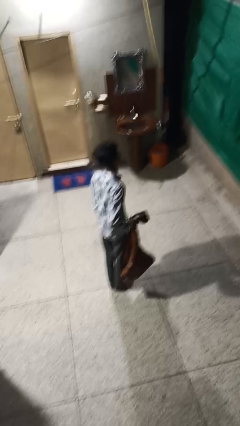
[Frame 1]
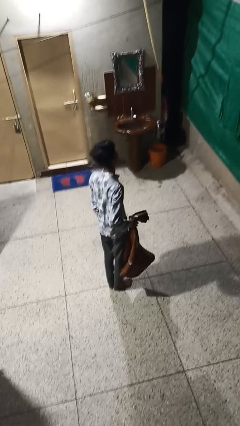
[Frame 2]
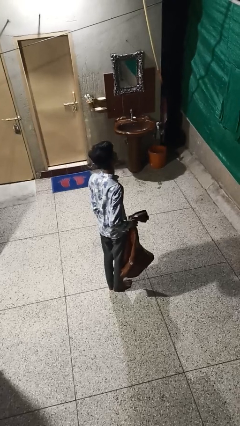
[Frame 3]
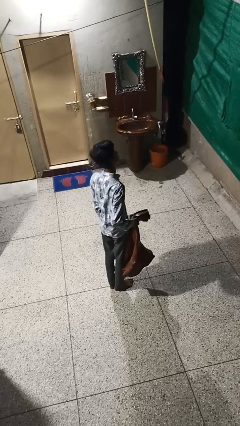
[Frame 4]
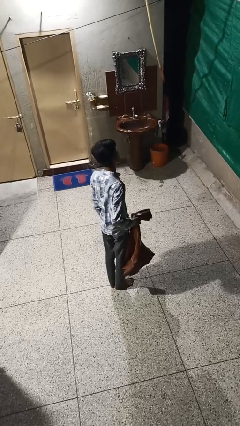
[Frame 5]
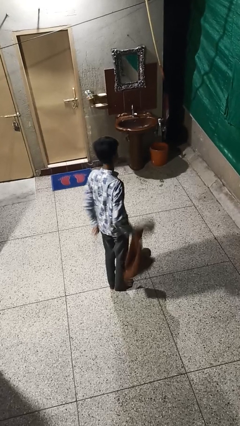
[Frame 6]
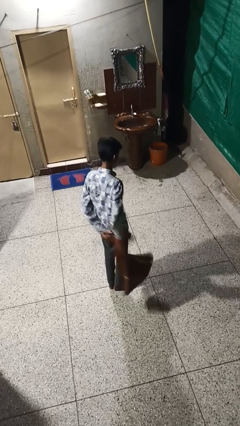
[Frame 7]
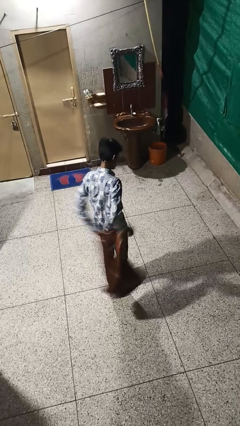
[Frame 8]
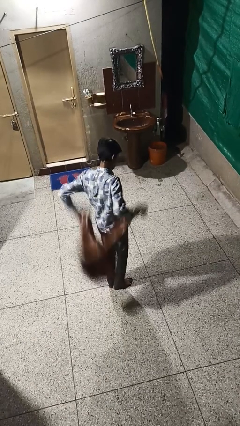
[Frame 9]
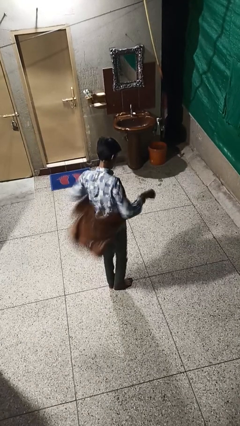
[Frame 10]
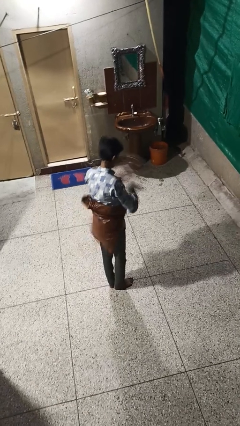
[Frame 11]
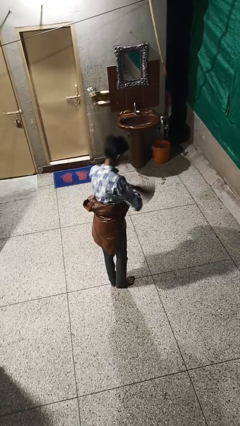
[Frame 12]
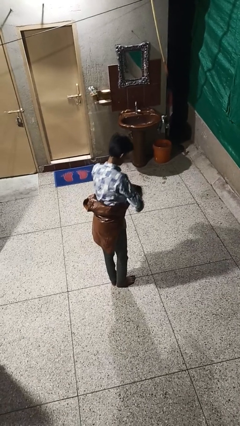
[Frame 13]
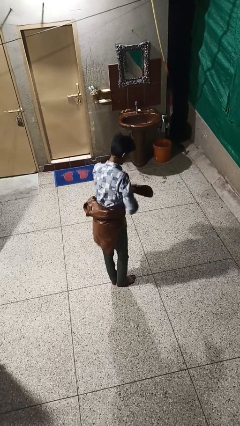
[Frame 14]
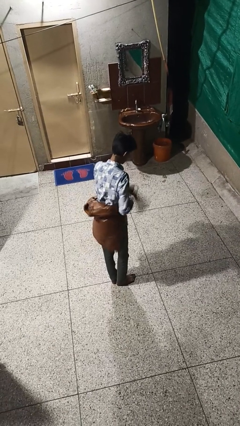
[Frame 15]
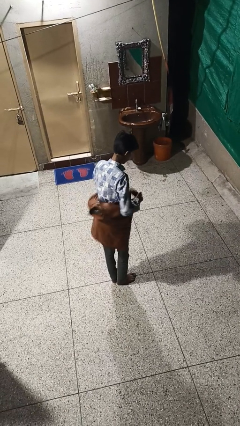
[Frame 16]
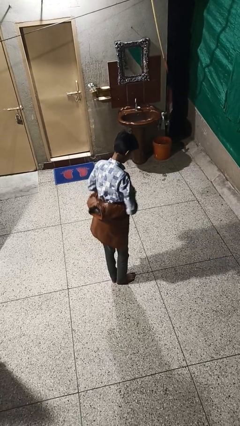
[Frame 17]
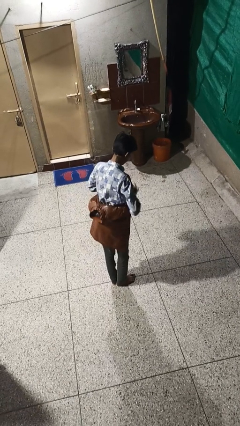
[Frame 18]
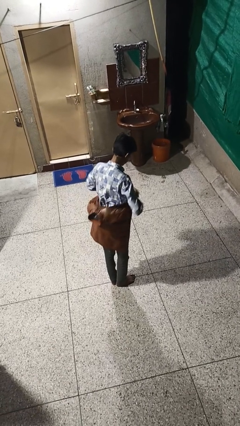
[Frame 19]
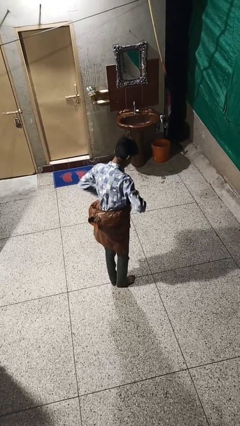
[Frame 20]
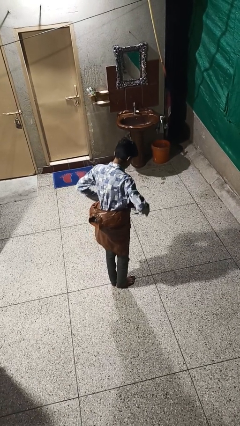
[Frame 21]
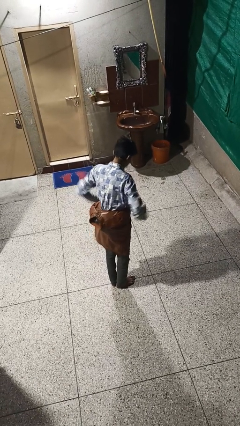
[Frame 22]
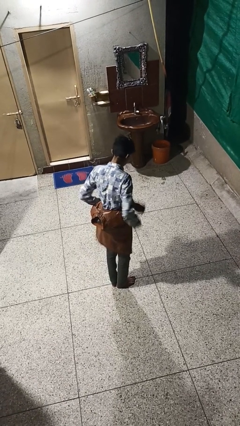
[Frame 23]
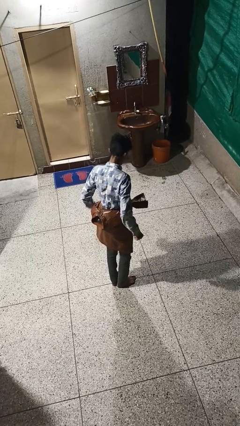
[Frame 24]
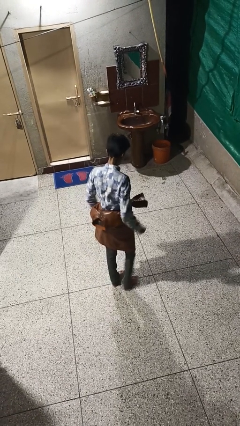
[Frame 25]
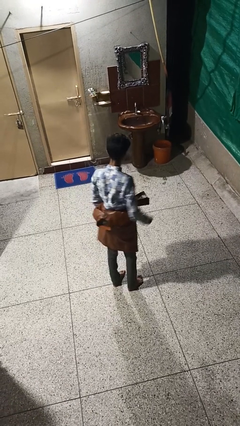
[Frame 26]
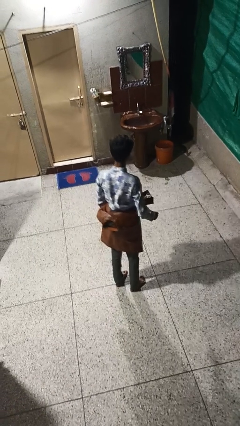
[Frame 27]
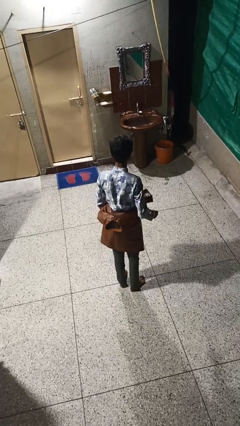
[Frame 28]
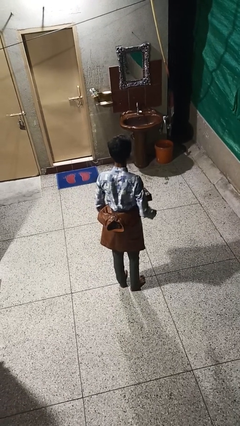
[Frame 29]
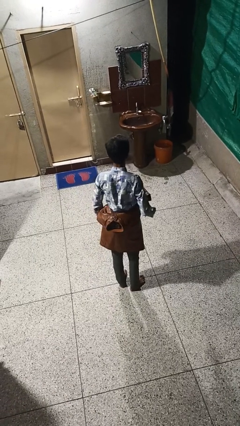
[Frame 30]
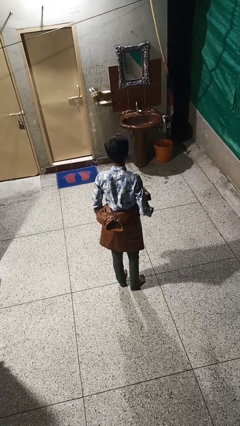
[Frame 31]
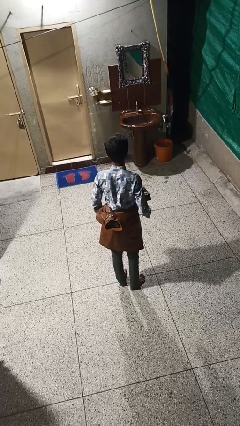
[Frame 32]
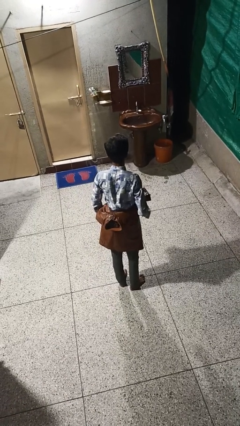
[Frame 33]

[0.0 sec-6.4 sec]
person ties jacket around waist

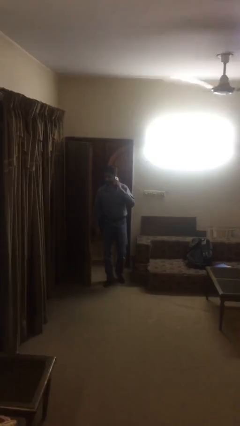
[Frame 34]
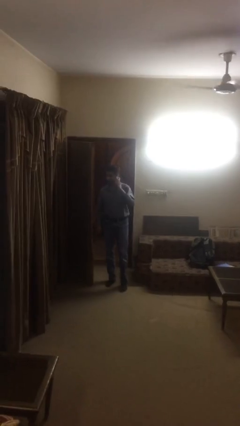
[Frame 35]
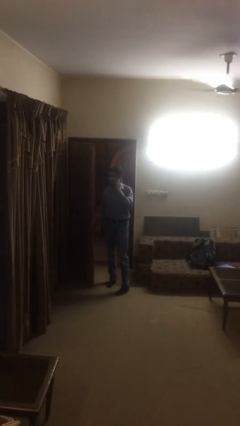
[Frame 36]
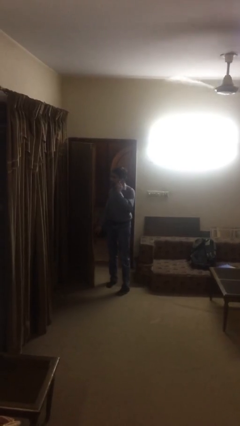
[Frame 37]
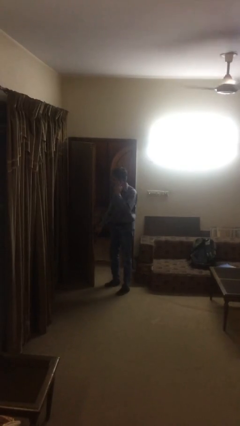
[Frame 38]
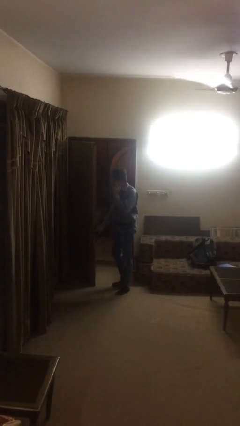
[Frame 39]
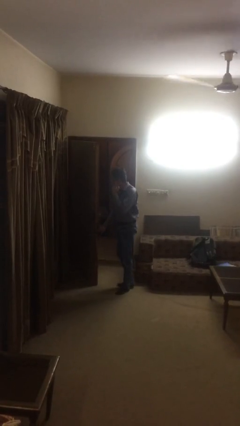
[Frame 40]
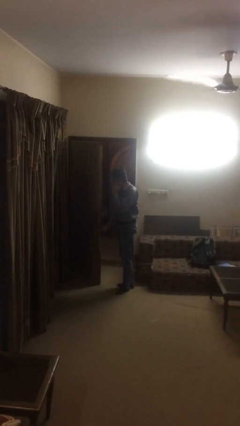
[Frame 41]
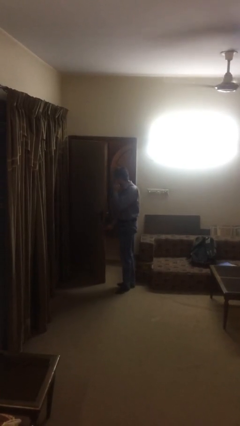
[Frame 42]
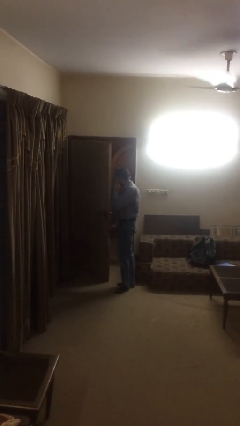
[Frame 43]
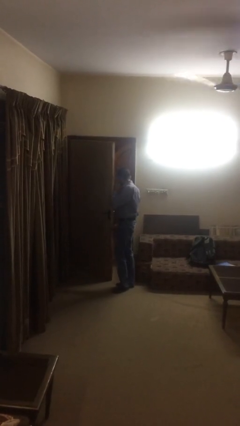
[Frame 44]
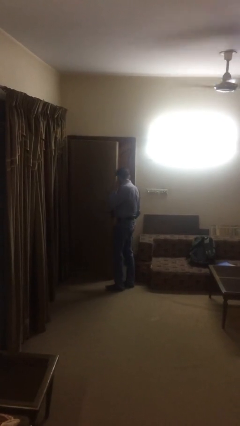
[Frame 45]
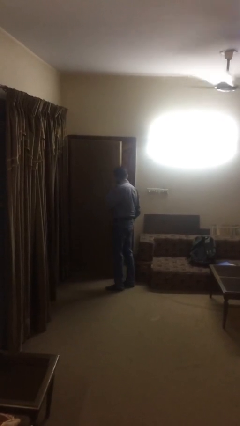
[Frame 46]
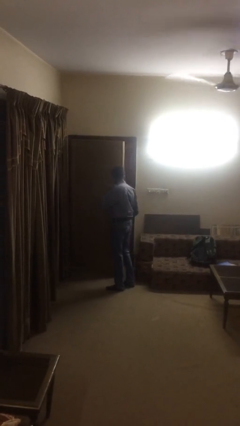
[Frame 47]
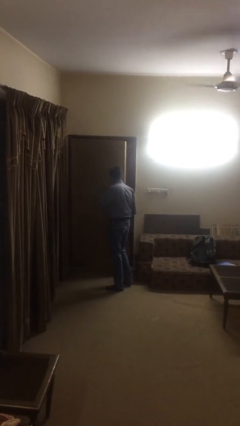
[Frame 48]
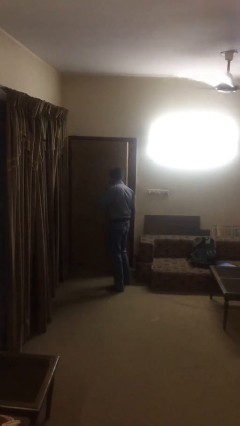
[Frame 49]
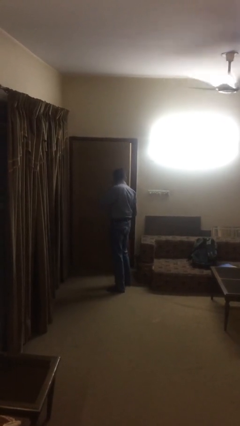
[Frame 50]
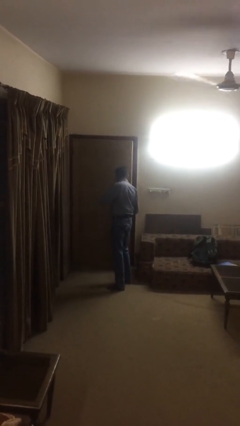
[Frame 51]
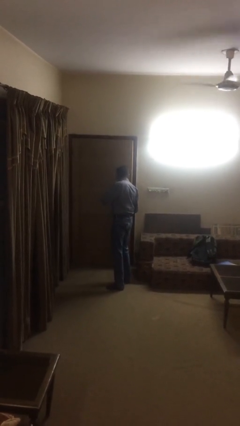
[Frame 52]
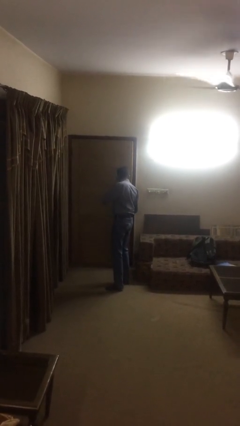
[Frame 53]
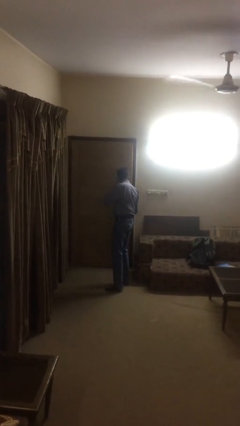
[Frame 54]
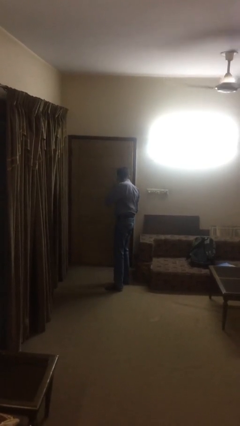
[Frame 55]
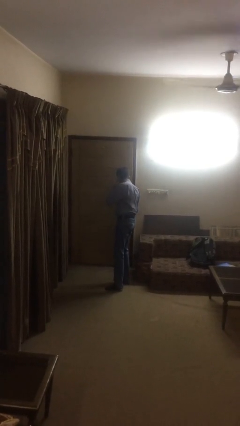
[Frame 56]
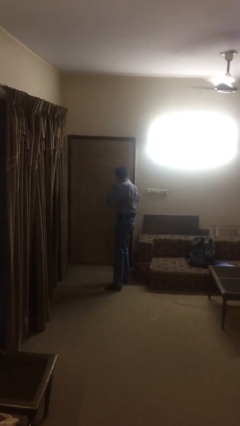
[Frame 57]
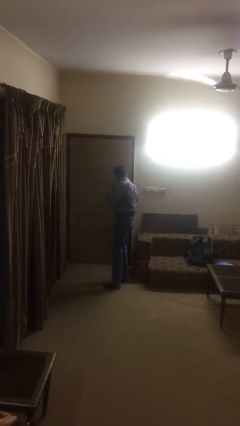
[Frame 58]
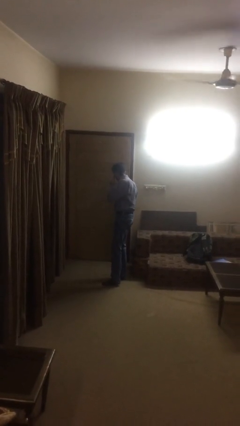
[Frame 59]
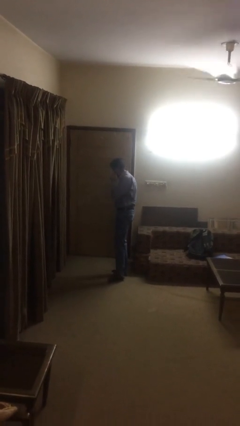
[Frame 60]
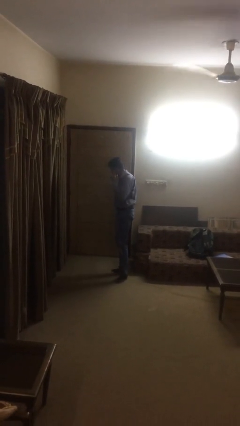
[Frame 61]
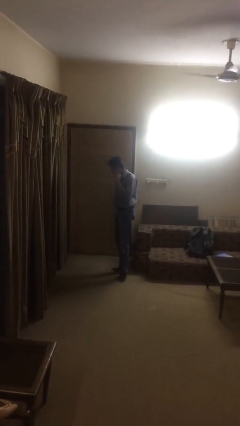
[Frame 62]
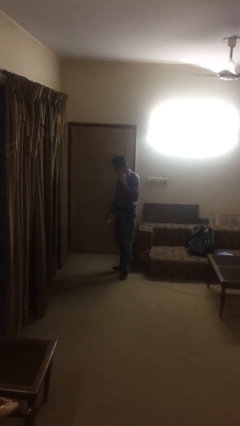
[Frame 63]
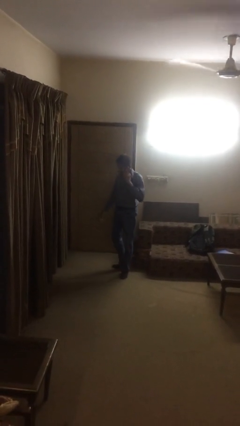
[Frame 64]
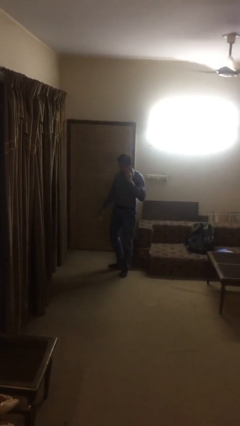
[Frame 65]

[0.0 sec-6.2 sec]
person closes facility door

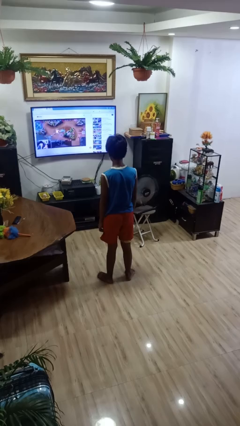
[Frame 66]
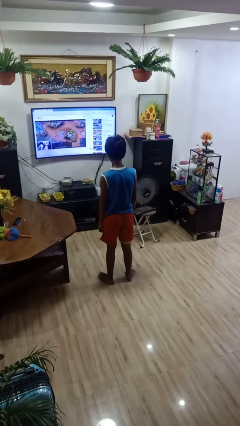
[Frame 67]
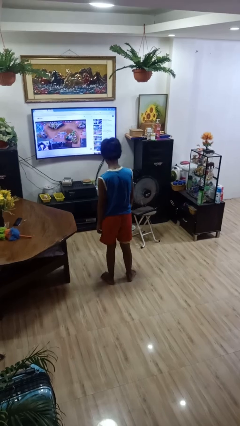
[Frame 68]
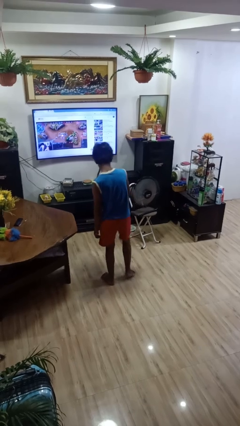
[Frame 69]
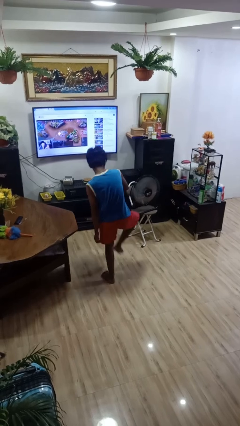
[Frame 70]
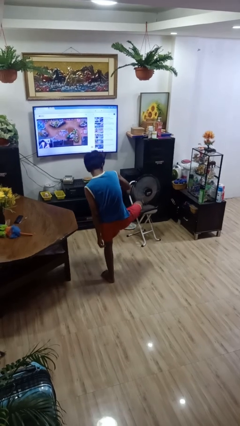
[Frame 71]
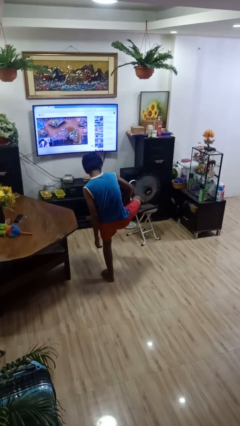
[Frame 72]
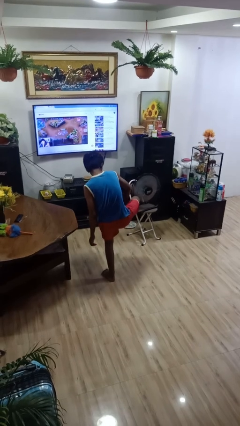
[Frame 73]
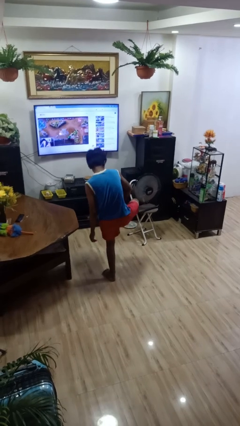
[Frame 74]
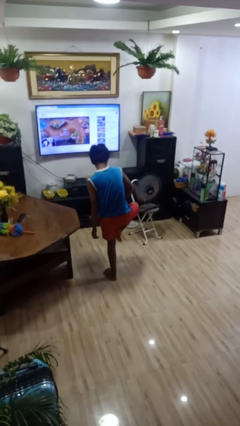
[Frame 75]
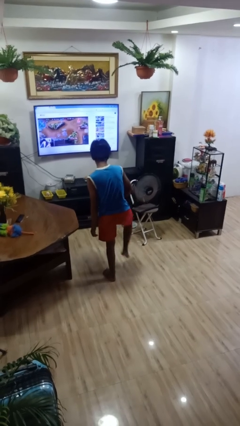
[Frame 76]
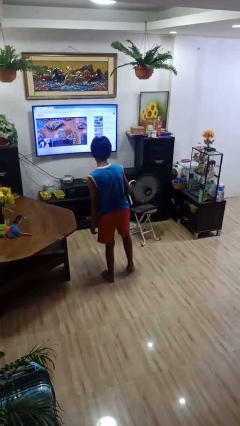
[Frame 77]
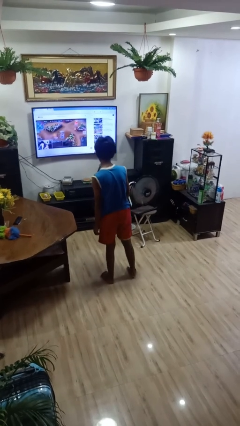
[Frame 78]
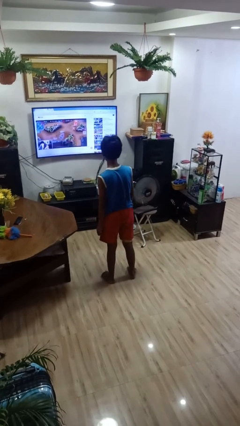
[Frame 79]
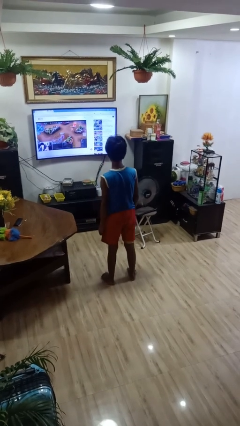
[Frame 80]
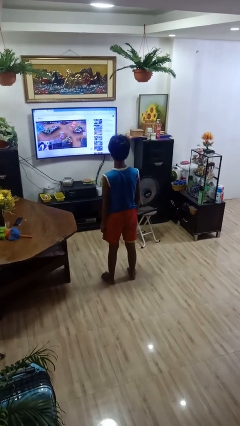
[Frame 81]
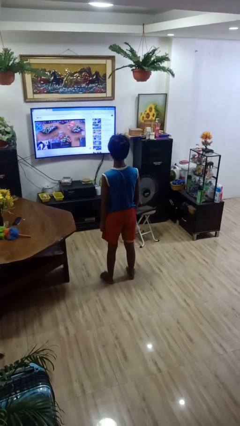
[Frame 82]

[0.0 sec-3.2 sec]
person swats bug

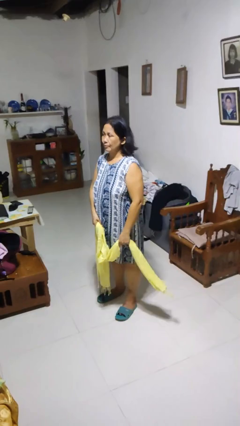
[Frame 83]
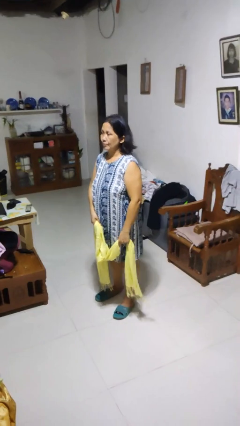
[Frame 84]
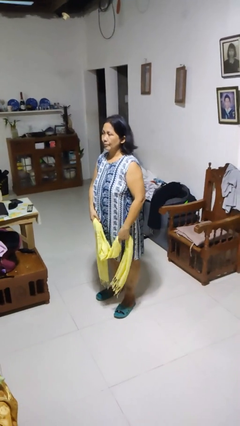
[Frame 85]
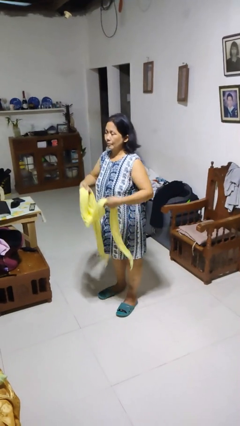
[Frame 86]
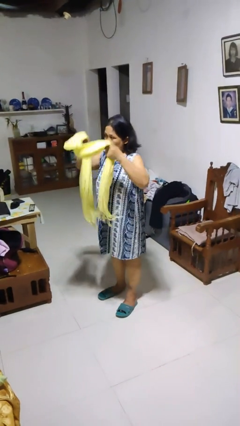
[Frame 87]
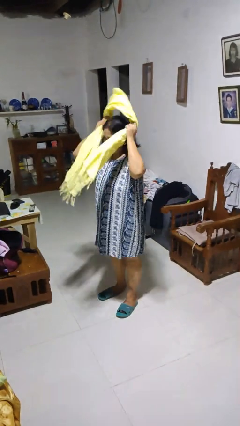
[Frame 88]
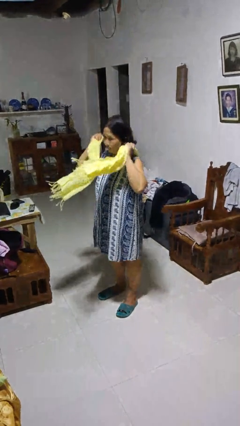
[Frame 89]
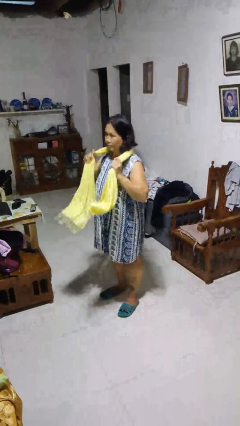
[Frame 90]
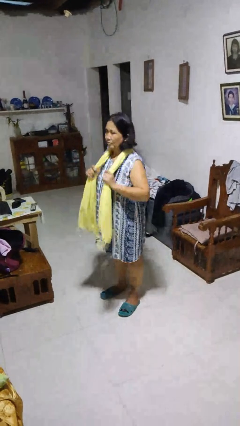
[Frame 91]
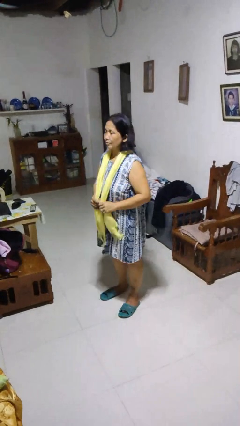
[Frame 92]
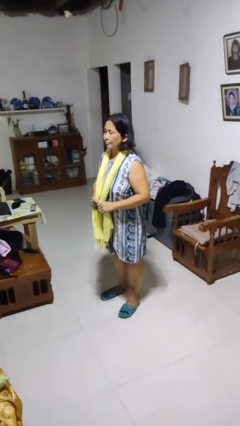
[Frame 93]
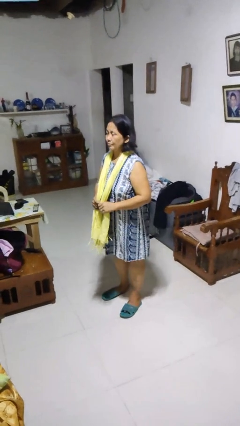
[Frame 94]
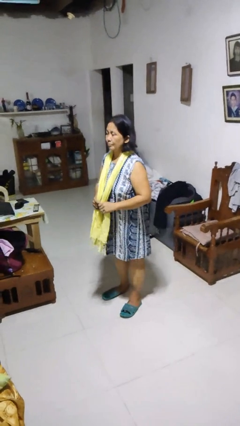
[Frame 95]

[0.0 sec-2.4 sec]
person puts on scarf
